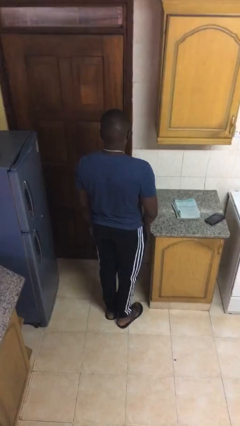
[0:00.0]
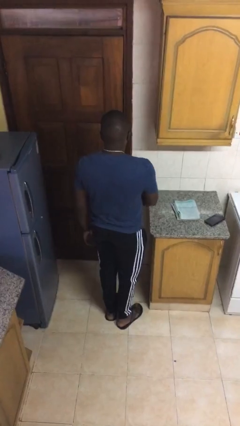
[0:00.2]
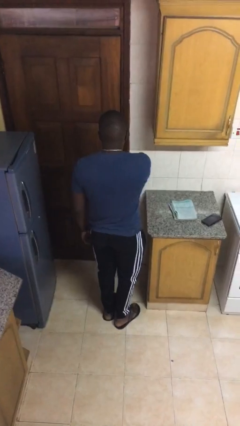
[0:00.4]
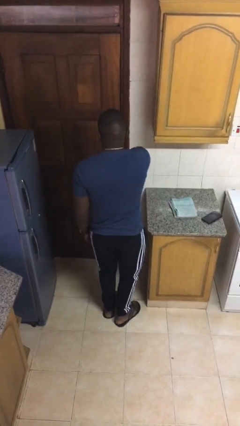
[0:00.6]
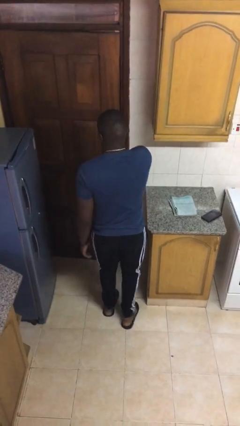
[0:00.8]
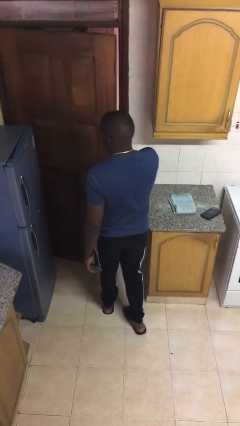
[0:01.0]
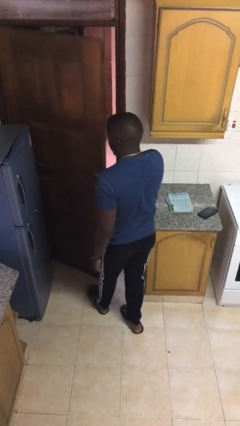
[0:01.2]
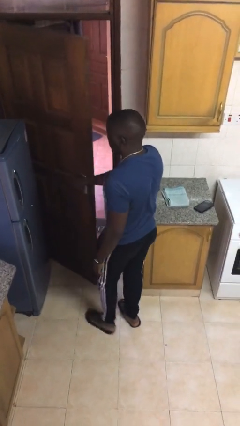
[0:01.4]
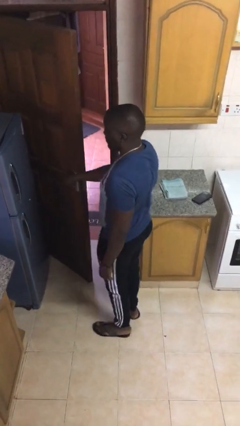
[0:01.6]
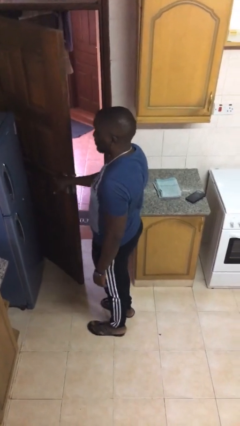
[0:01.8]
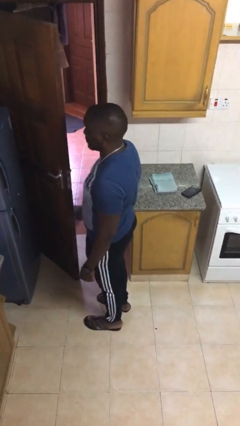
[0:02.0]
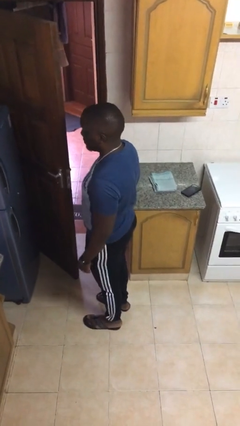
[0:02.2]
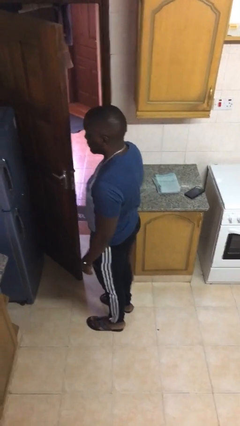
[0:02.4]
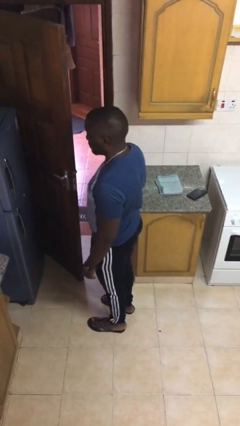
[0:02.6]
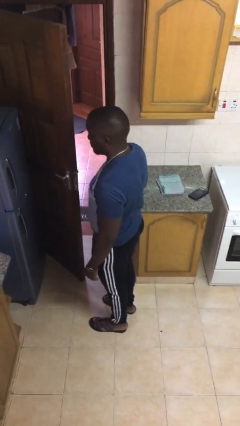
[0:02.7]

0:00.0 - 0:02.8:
person opens facility door

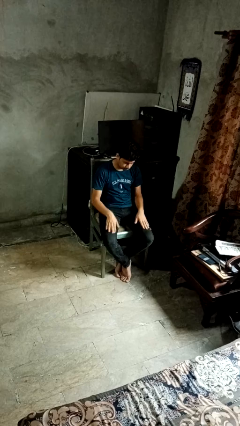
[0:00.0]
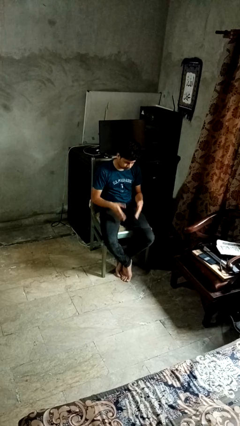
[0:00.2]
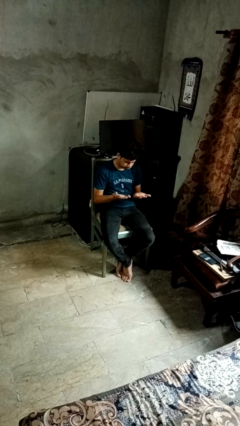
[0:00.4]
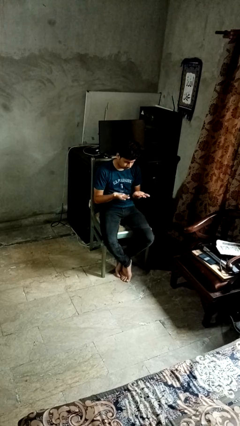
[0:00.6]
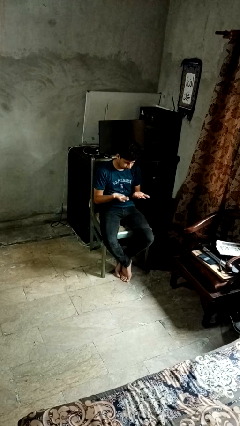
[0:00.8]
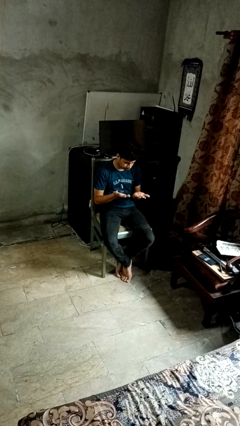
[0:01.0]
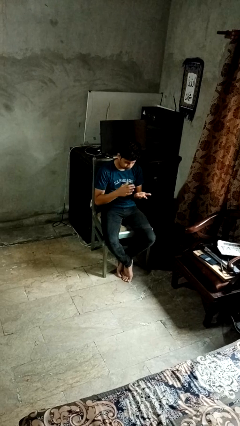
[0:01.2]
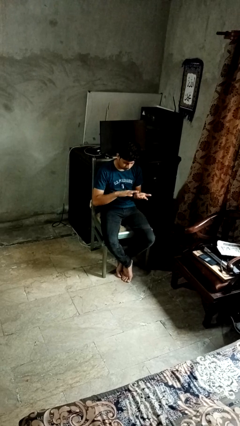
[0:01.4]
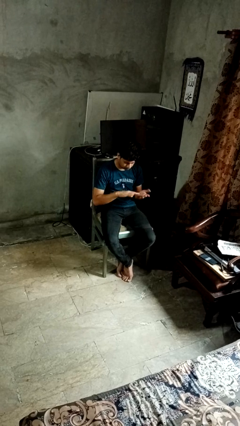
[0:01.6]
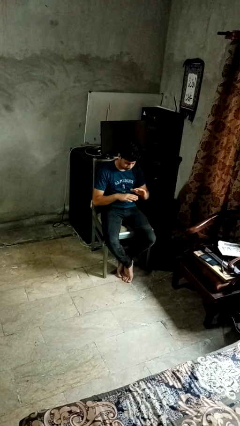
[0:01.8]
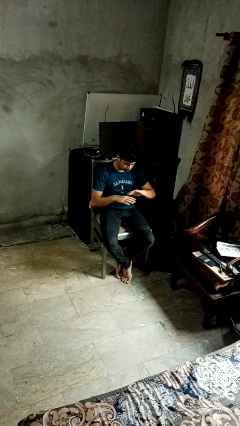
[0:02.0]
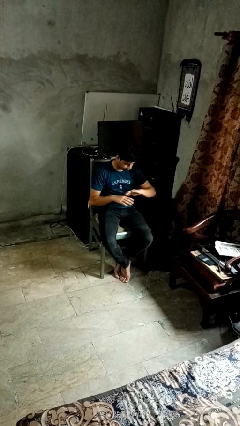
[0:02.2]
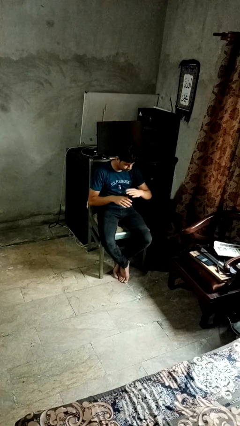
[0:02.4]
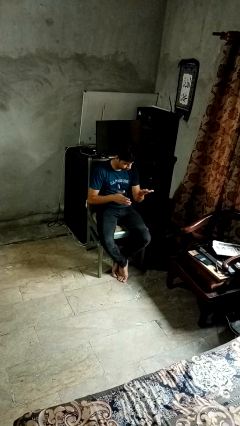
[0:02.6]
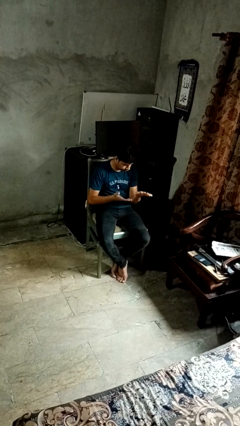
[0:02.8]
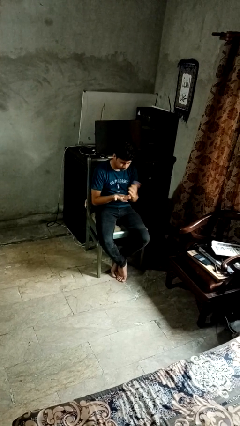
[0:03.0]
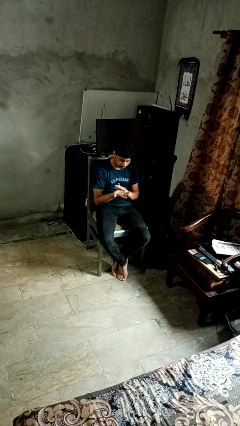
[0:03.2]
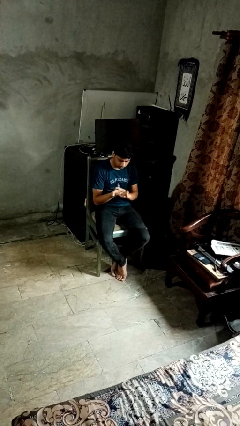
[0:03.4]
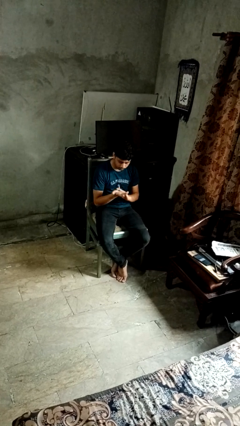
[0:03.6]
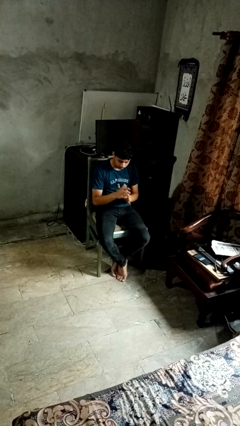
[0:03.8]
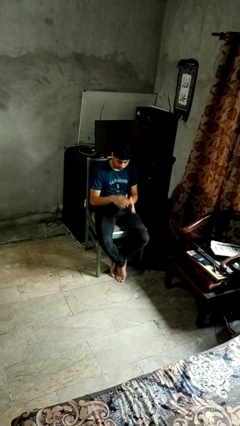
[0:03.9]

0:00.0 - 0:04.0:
person looks at hands in lap

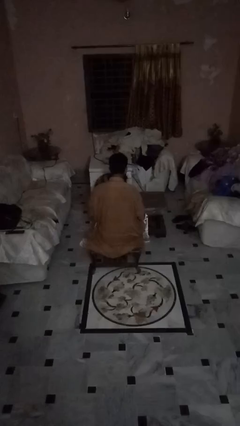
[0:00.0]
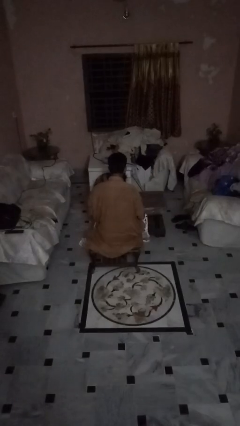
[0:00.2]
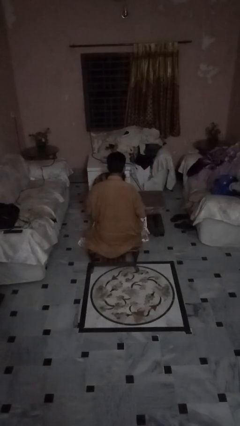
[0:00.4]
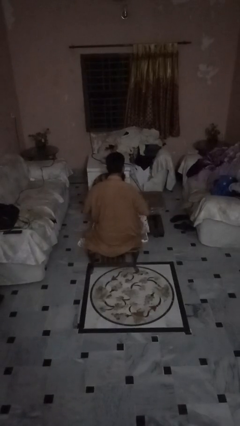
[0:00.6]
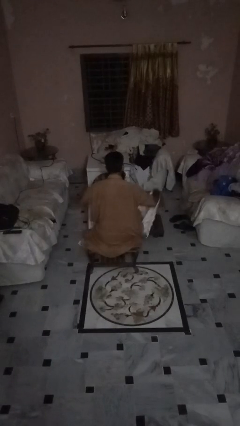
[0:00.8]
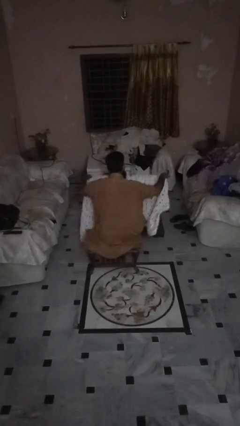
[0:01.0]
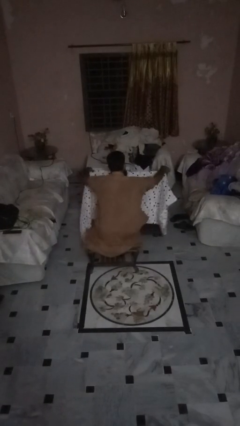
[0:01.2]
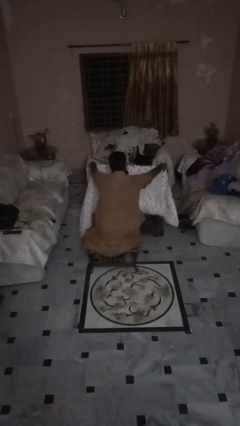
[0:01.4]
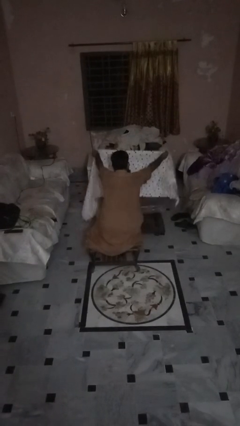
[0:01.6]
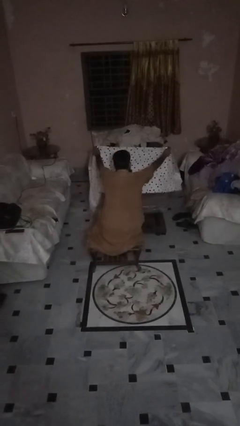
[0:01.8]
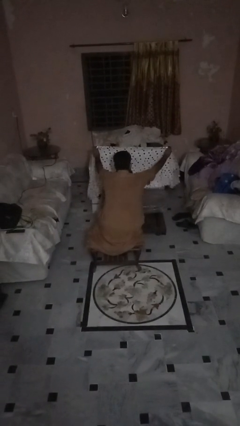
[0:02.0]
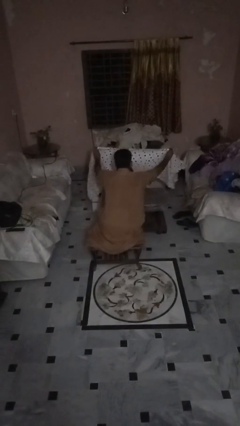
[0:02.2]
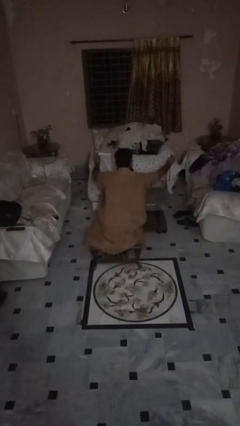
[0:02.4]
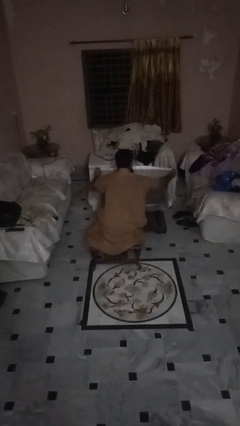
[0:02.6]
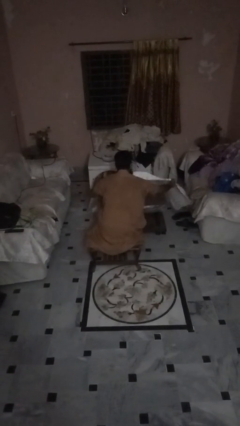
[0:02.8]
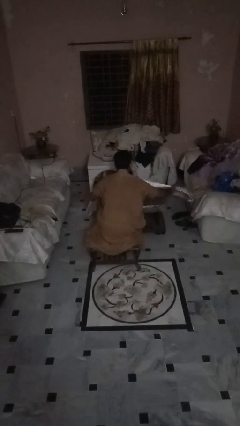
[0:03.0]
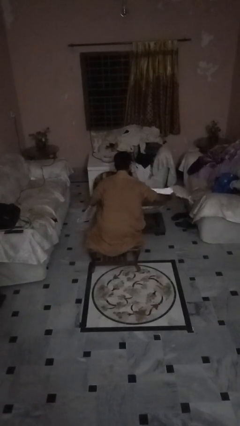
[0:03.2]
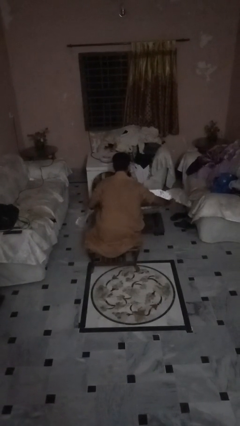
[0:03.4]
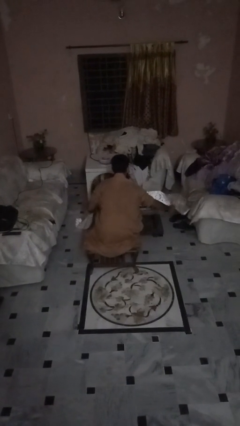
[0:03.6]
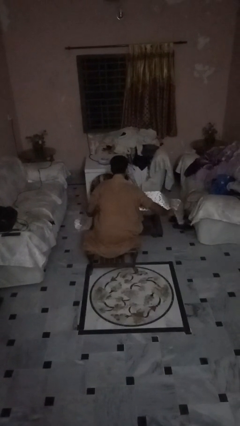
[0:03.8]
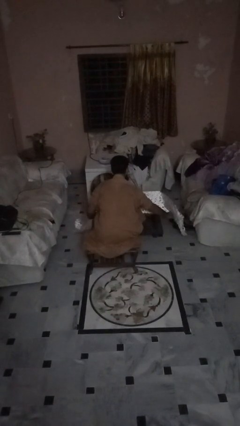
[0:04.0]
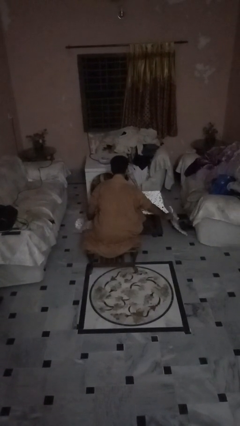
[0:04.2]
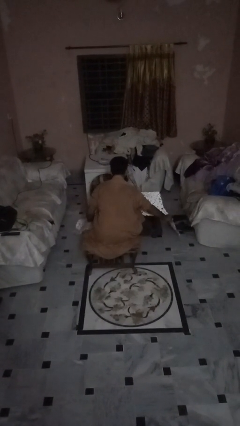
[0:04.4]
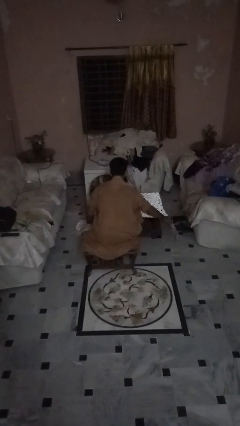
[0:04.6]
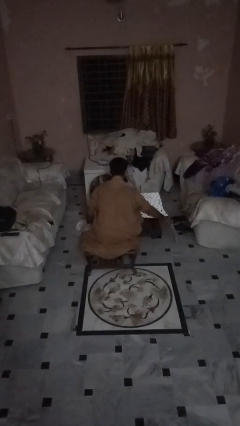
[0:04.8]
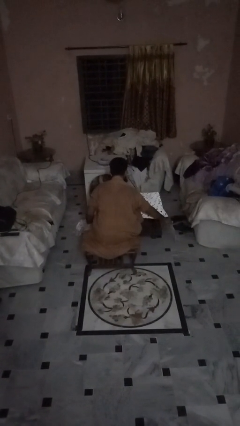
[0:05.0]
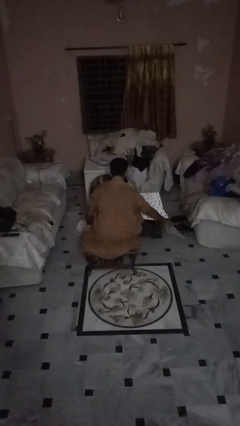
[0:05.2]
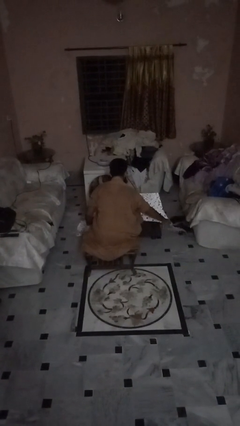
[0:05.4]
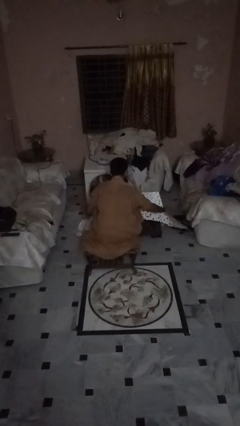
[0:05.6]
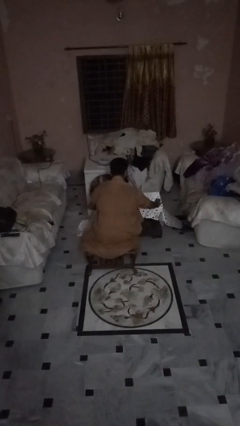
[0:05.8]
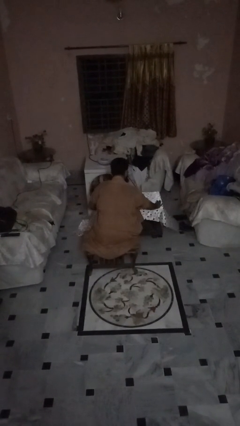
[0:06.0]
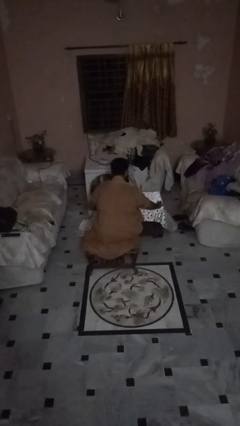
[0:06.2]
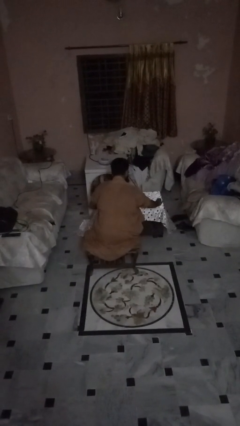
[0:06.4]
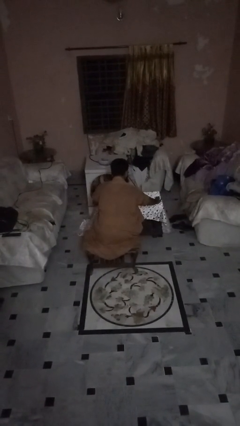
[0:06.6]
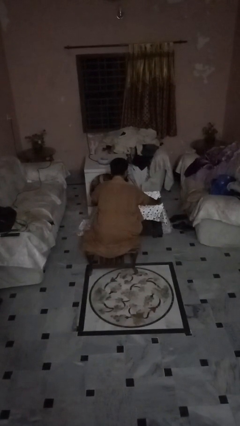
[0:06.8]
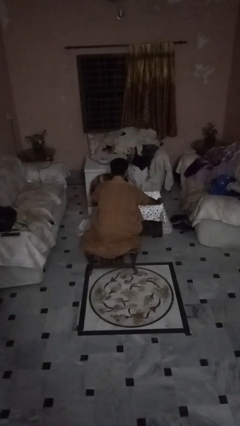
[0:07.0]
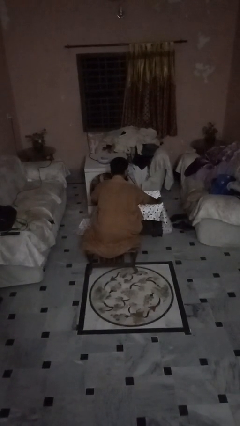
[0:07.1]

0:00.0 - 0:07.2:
person spreads tablecloth

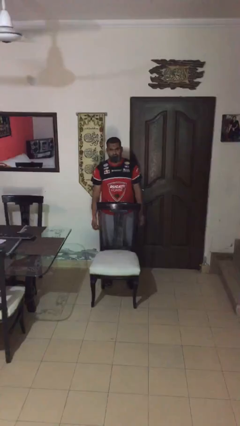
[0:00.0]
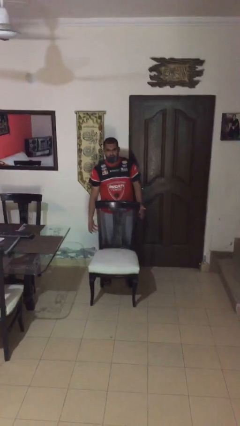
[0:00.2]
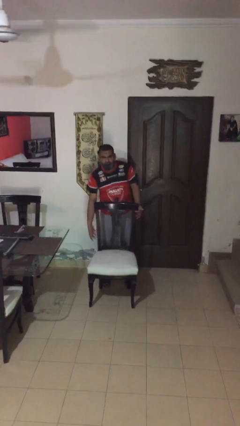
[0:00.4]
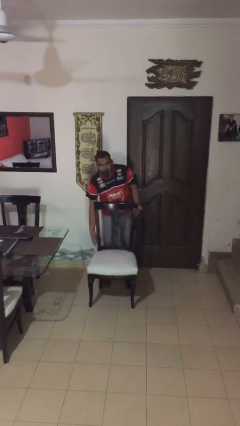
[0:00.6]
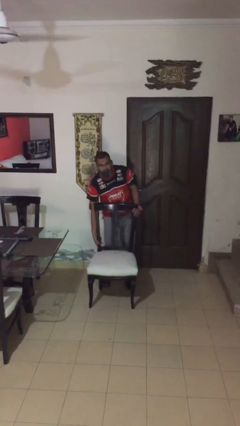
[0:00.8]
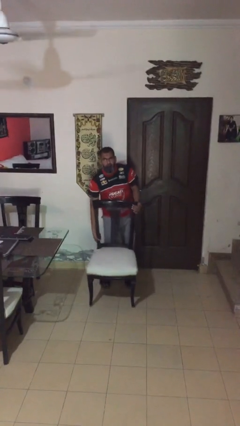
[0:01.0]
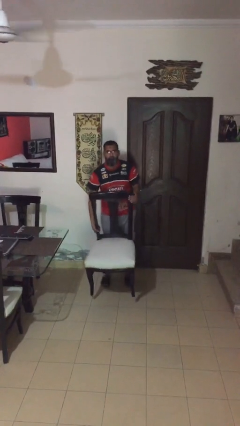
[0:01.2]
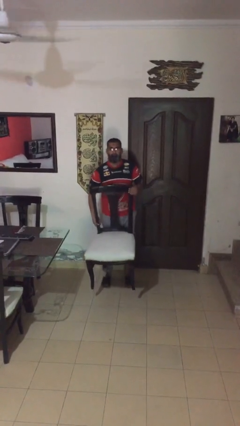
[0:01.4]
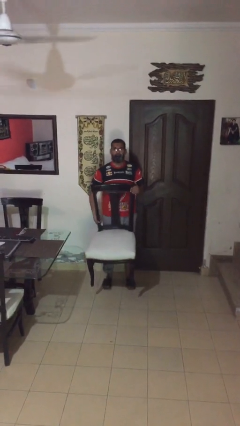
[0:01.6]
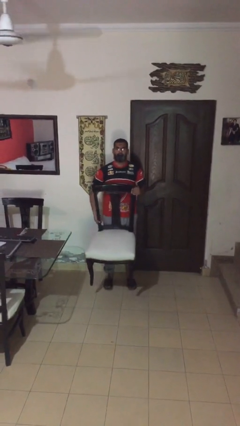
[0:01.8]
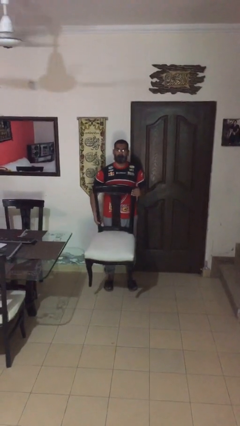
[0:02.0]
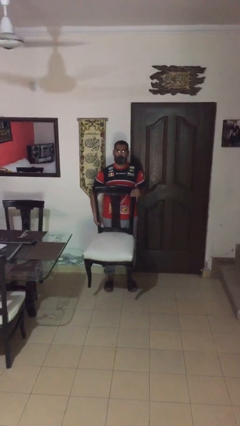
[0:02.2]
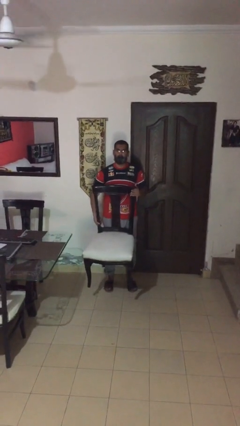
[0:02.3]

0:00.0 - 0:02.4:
person picks up object from floor

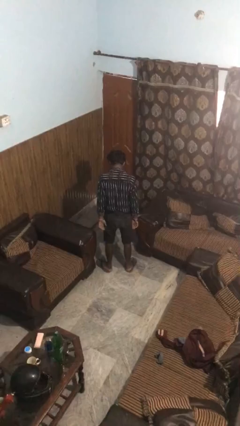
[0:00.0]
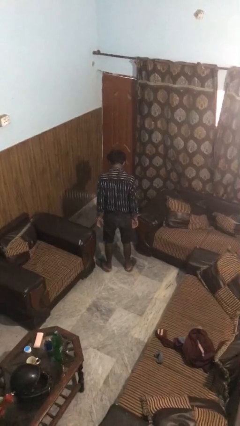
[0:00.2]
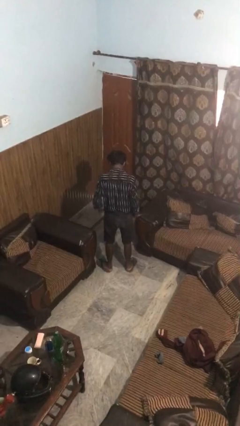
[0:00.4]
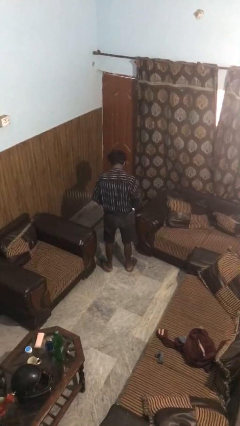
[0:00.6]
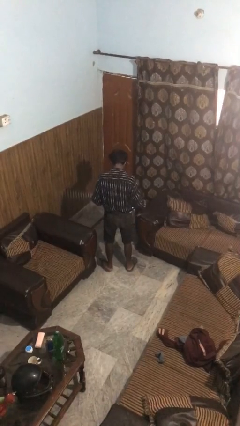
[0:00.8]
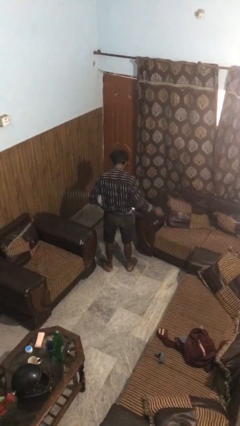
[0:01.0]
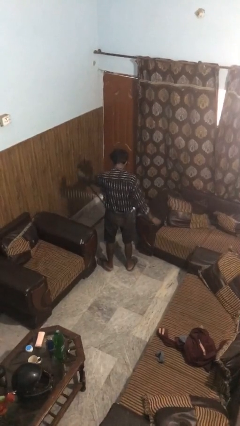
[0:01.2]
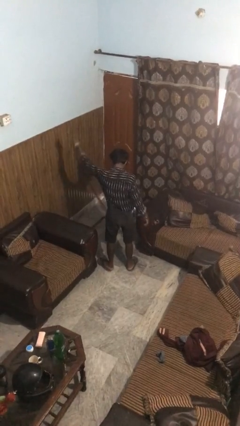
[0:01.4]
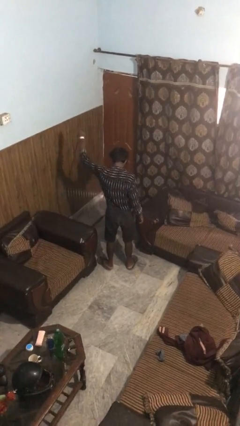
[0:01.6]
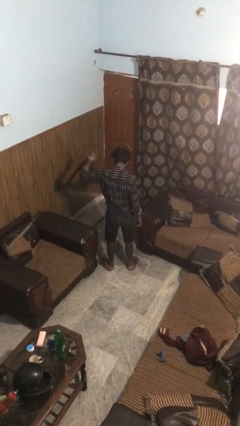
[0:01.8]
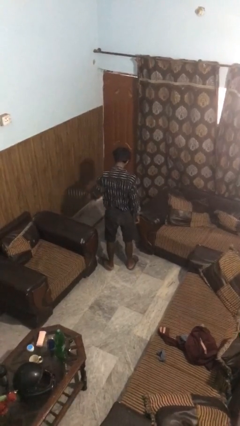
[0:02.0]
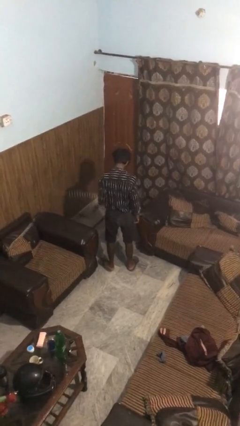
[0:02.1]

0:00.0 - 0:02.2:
person takes off belt
